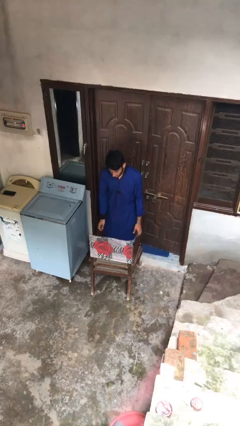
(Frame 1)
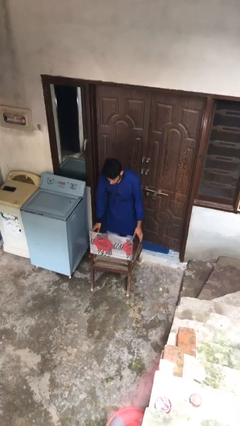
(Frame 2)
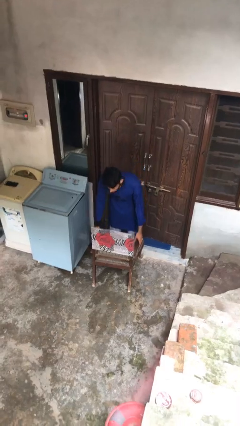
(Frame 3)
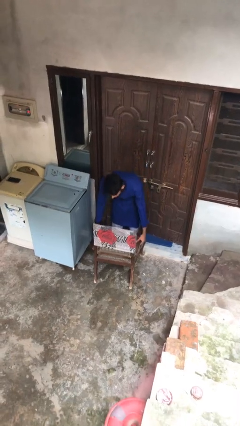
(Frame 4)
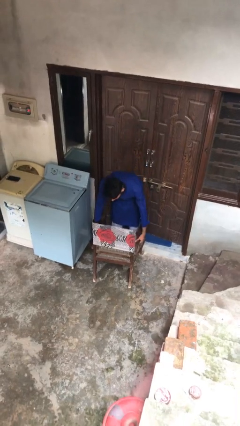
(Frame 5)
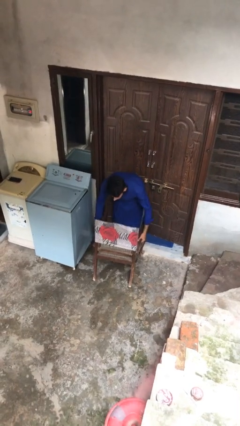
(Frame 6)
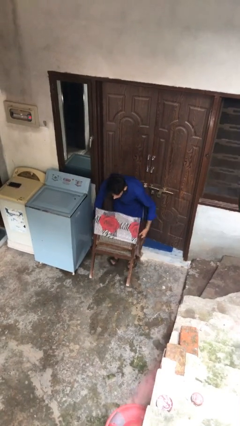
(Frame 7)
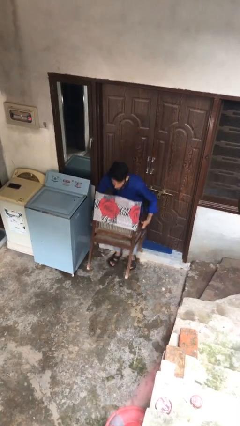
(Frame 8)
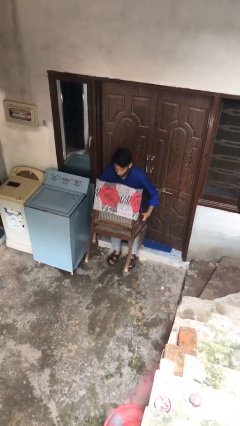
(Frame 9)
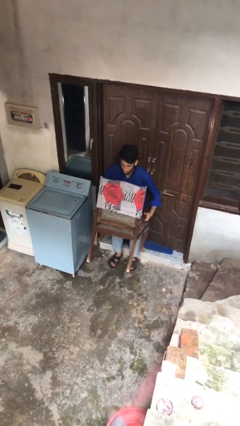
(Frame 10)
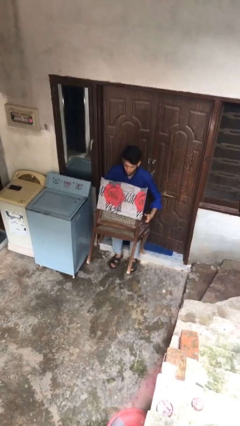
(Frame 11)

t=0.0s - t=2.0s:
person picks up object from floor

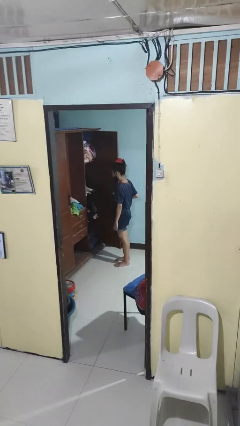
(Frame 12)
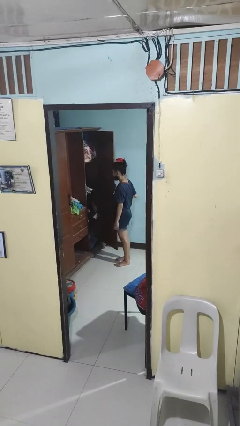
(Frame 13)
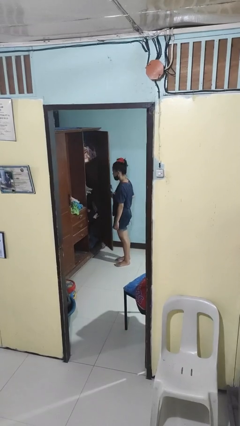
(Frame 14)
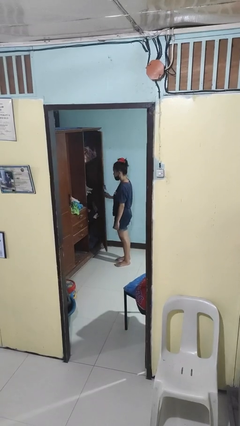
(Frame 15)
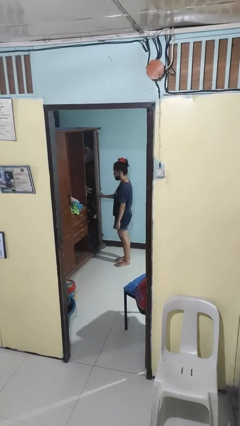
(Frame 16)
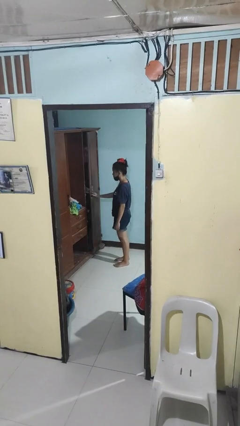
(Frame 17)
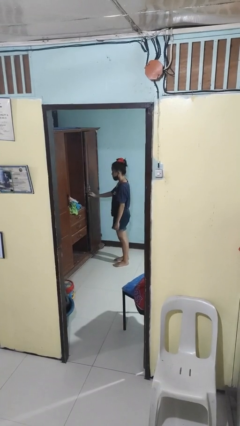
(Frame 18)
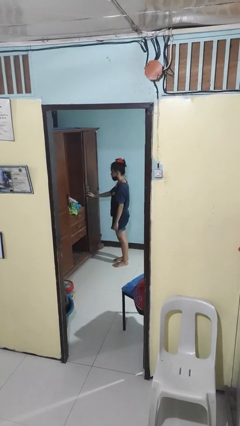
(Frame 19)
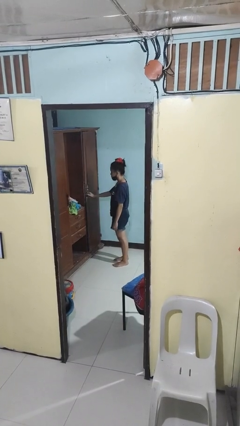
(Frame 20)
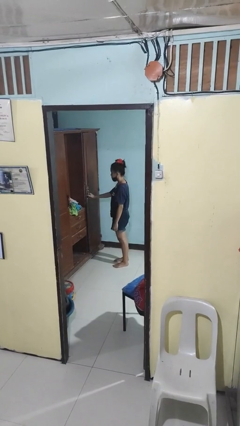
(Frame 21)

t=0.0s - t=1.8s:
person closes closet door

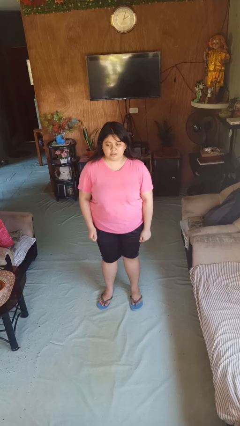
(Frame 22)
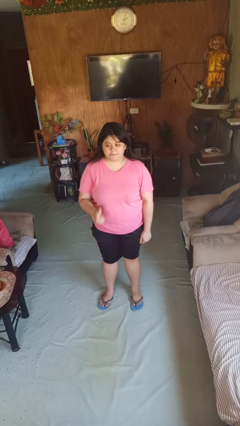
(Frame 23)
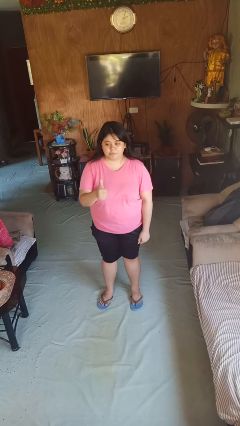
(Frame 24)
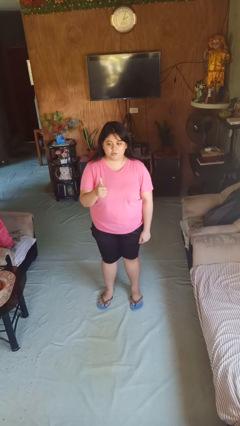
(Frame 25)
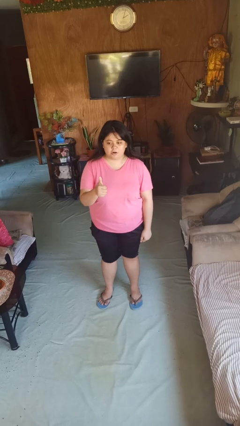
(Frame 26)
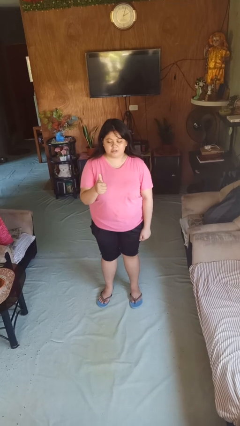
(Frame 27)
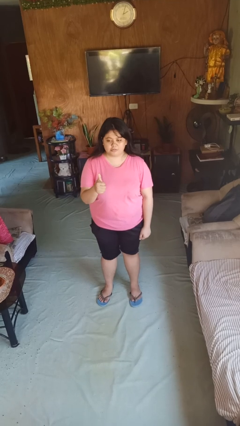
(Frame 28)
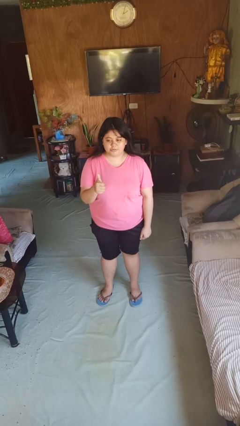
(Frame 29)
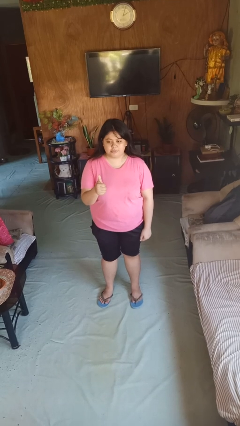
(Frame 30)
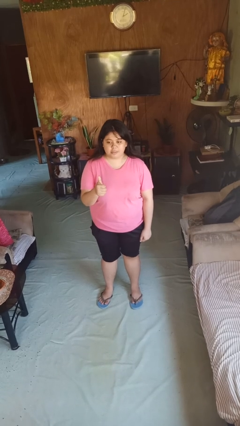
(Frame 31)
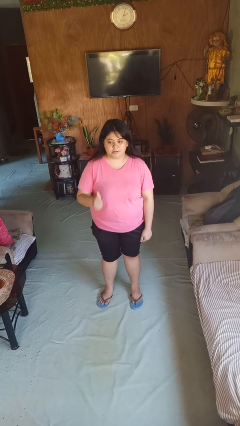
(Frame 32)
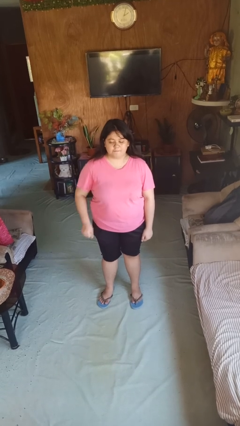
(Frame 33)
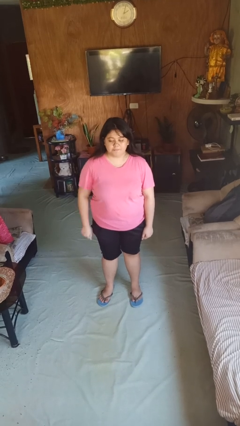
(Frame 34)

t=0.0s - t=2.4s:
person gestures thumbs up

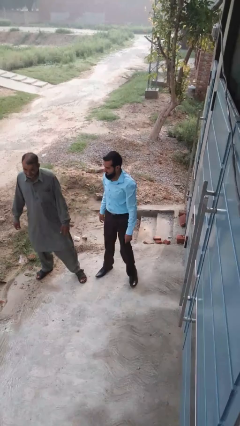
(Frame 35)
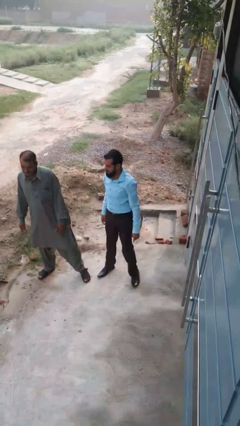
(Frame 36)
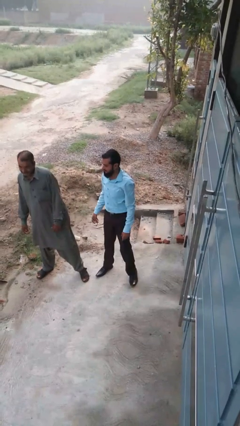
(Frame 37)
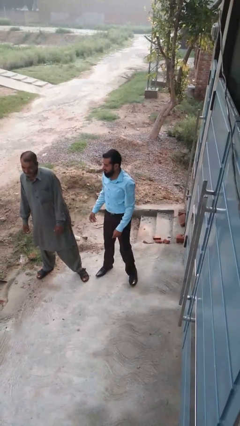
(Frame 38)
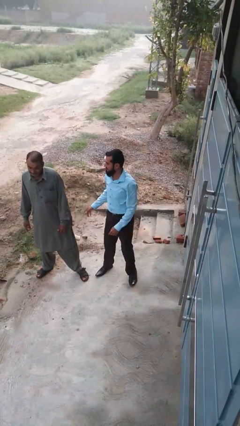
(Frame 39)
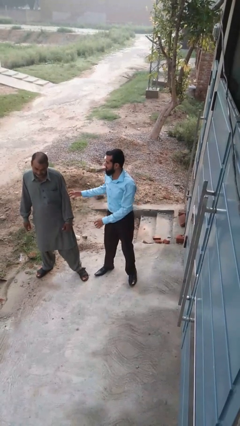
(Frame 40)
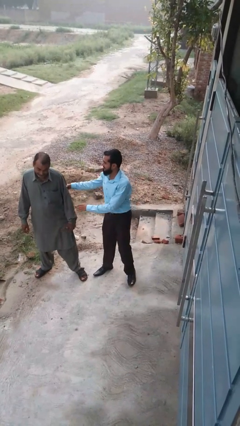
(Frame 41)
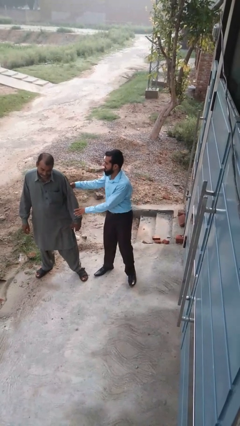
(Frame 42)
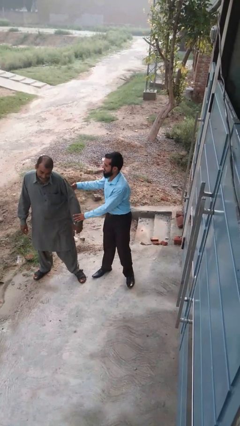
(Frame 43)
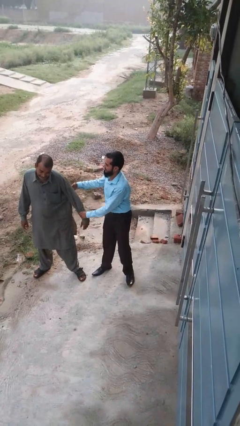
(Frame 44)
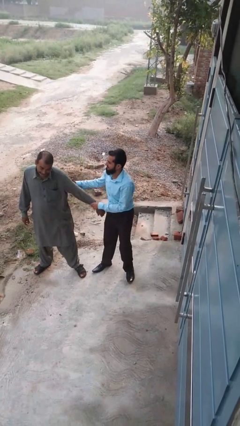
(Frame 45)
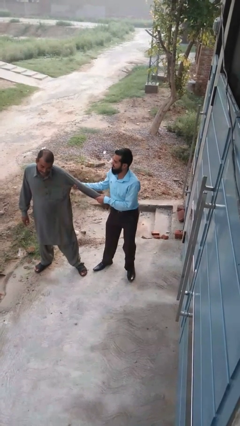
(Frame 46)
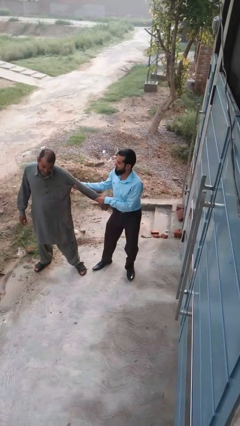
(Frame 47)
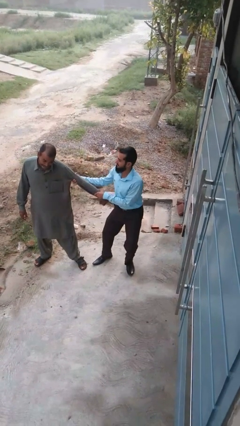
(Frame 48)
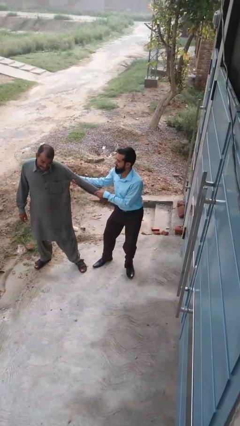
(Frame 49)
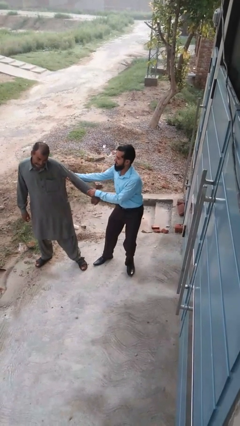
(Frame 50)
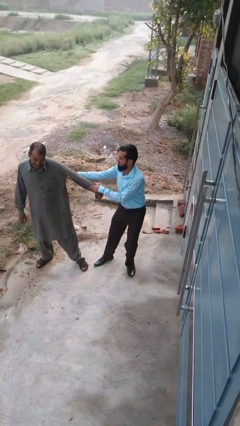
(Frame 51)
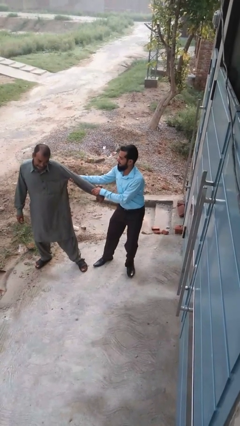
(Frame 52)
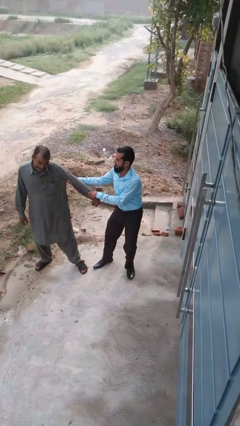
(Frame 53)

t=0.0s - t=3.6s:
person grabs person by forearm

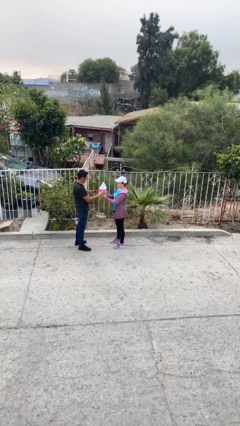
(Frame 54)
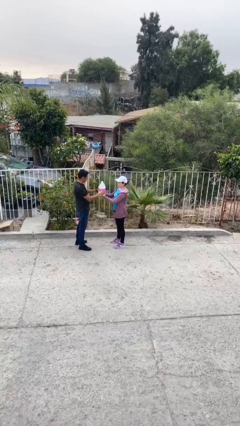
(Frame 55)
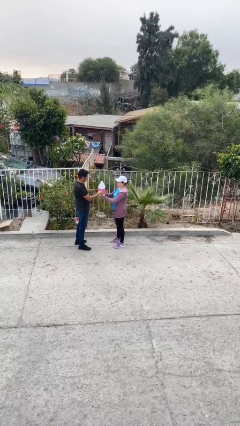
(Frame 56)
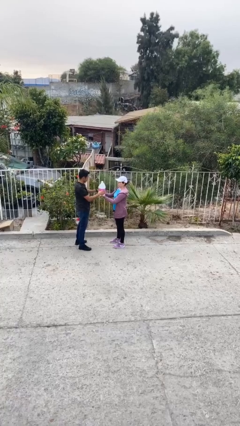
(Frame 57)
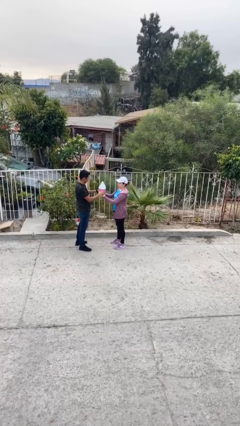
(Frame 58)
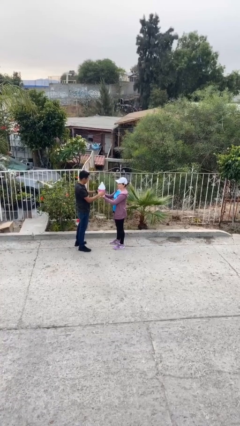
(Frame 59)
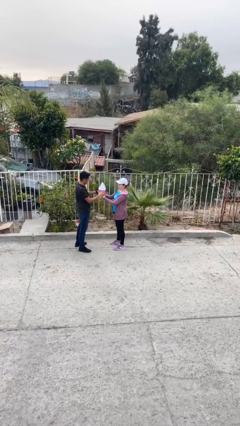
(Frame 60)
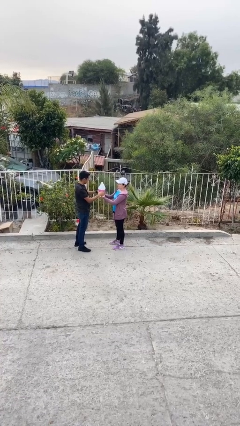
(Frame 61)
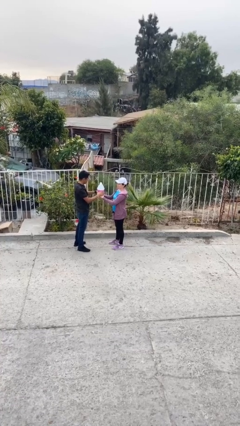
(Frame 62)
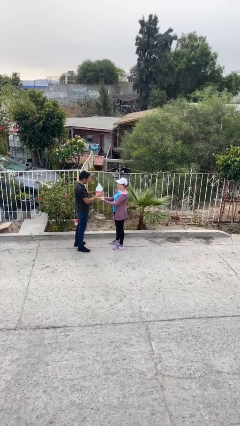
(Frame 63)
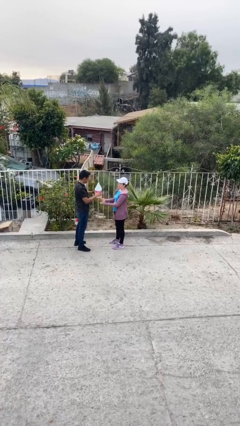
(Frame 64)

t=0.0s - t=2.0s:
person transfers object to person

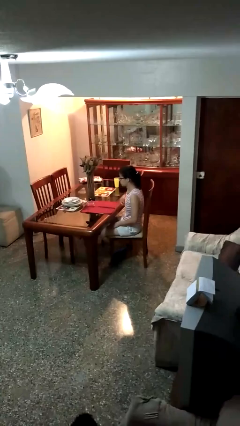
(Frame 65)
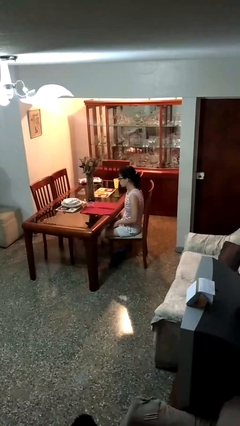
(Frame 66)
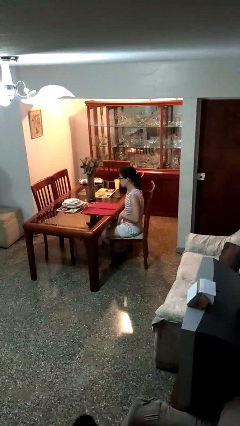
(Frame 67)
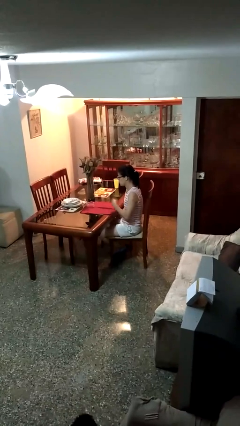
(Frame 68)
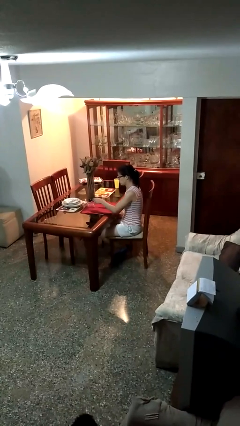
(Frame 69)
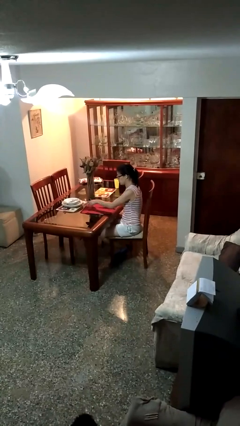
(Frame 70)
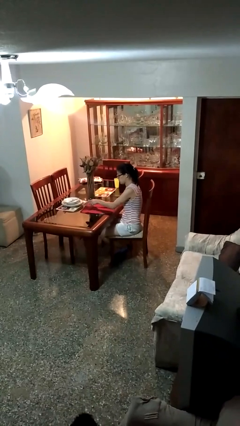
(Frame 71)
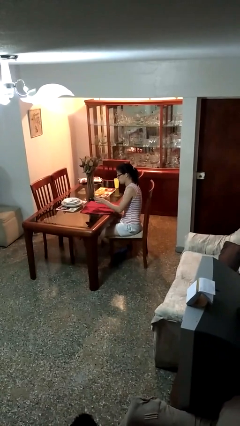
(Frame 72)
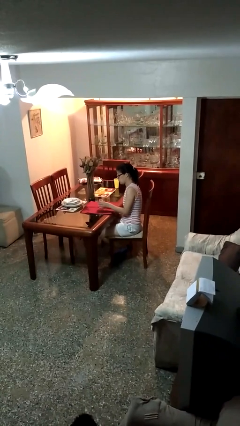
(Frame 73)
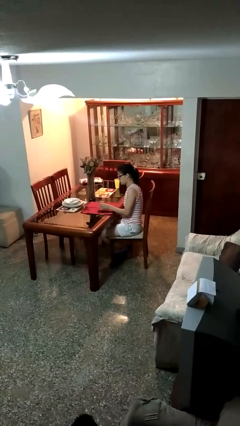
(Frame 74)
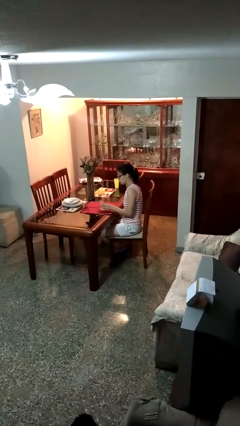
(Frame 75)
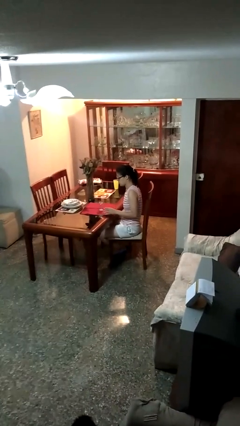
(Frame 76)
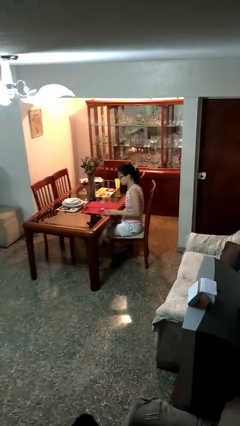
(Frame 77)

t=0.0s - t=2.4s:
person sets upright glass

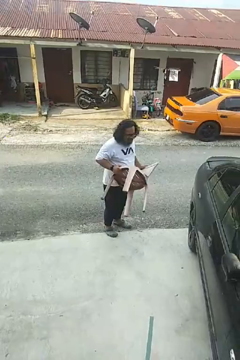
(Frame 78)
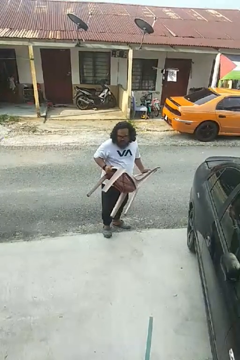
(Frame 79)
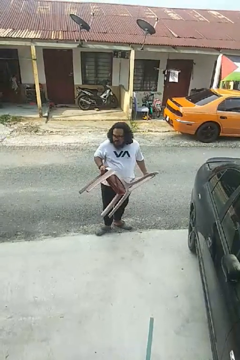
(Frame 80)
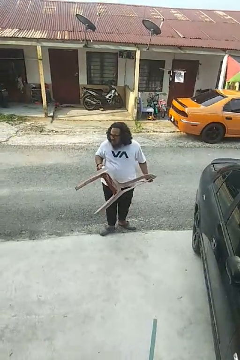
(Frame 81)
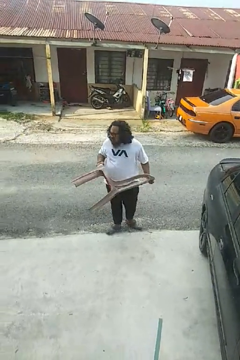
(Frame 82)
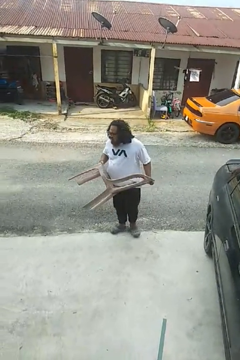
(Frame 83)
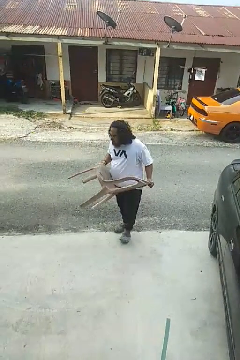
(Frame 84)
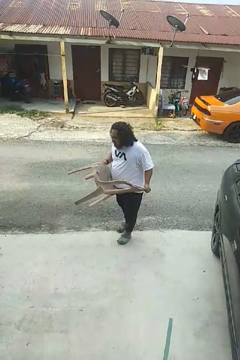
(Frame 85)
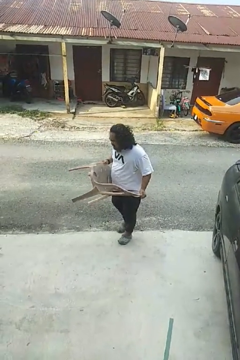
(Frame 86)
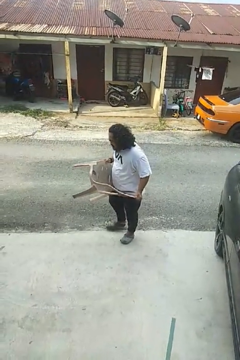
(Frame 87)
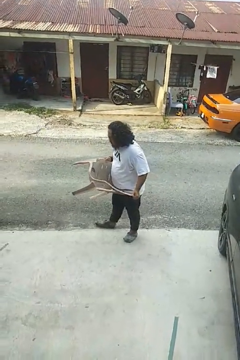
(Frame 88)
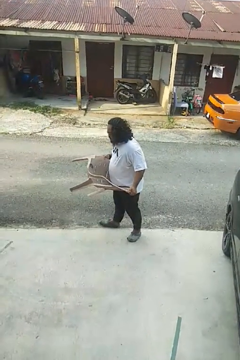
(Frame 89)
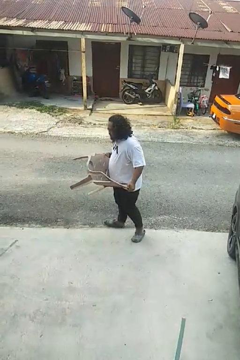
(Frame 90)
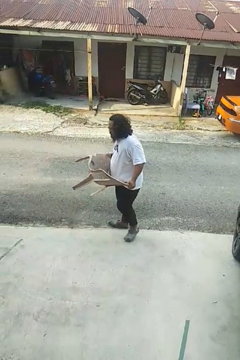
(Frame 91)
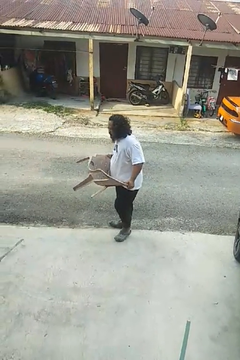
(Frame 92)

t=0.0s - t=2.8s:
person carries furniture

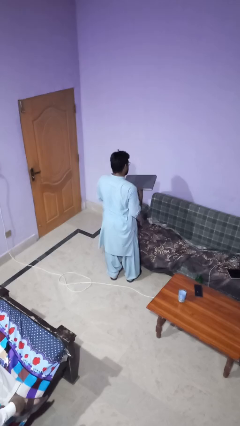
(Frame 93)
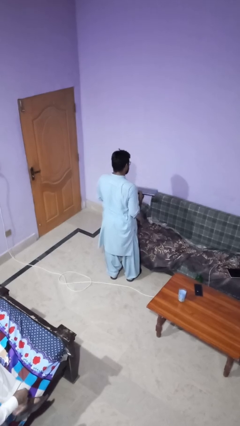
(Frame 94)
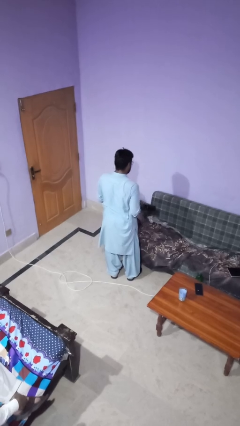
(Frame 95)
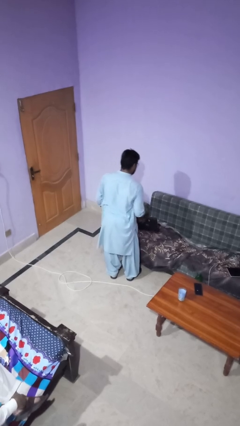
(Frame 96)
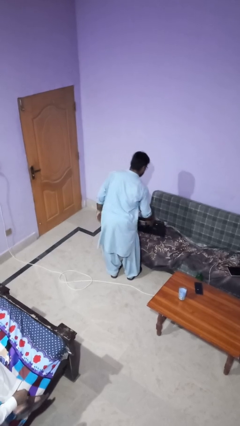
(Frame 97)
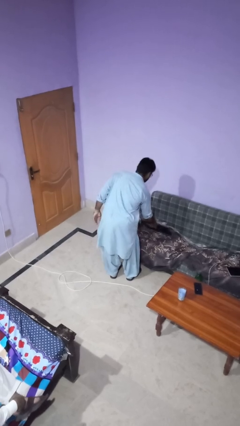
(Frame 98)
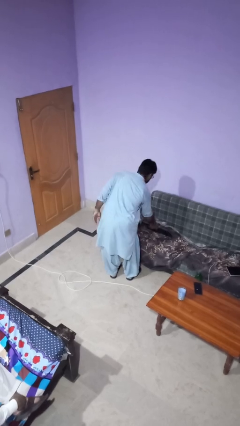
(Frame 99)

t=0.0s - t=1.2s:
person puts down object on couch
